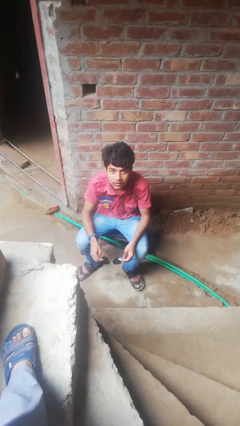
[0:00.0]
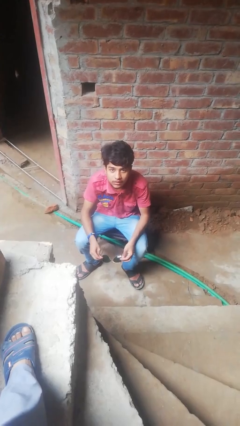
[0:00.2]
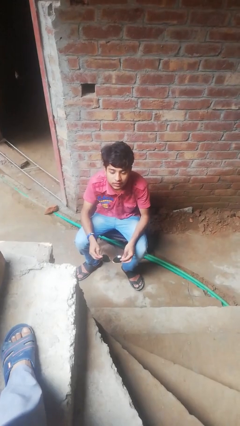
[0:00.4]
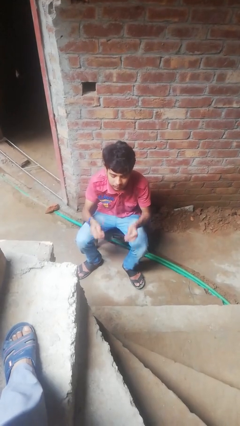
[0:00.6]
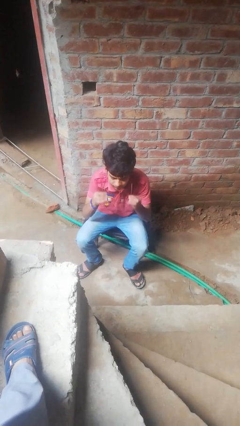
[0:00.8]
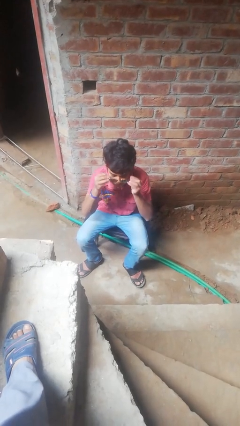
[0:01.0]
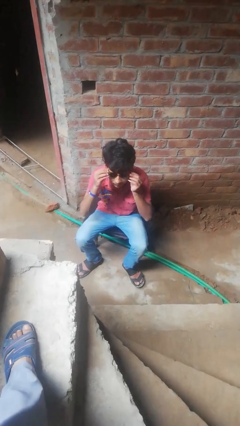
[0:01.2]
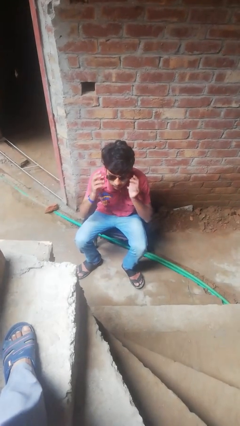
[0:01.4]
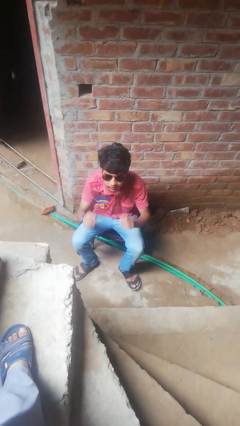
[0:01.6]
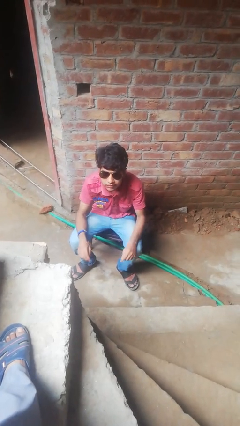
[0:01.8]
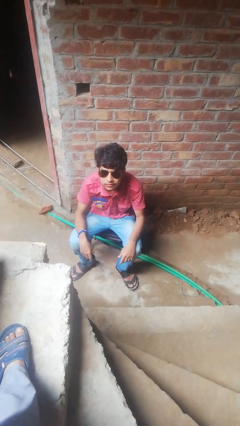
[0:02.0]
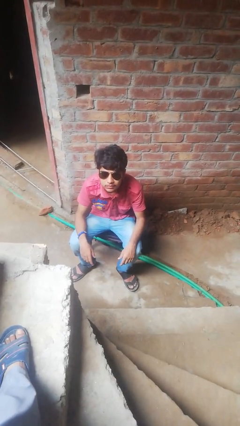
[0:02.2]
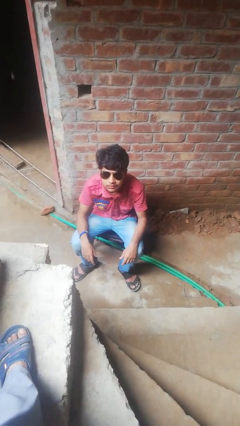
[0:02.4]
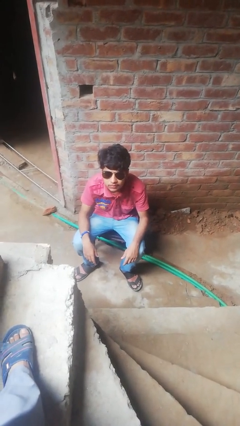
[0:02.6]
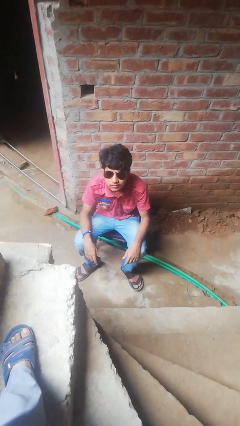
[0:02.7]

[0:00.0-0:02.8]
person puts on glasses

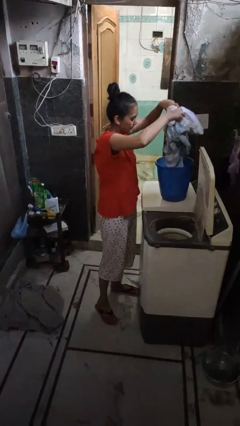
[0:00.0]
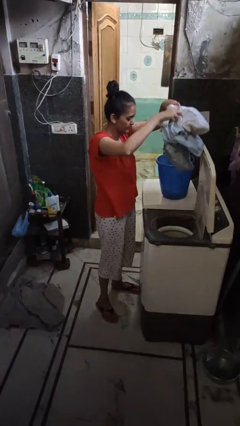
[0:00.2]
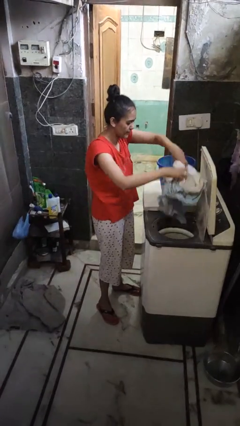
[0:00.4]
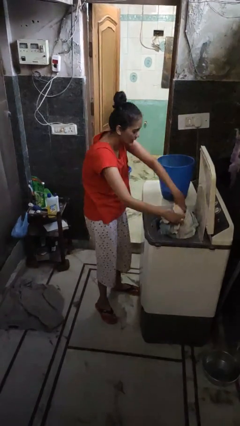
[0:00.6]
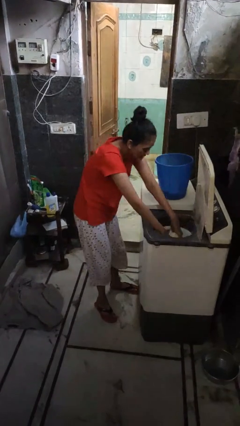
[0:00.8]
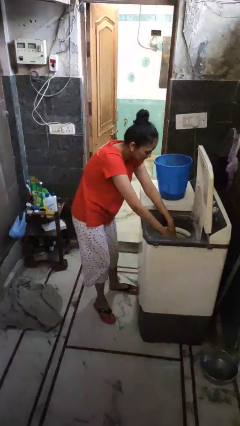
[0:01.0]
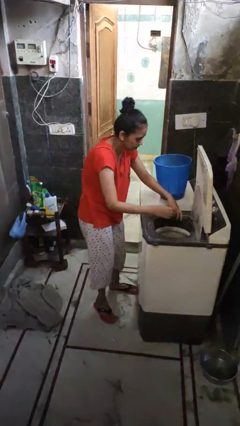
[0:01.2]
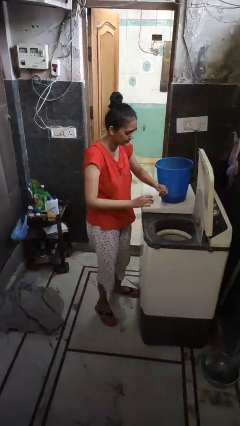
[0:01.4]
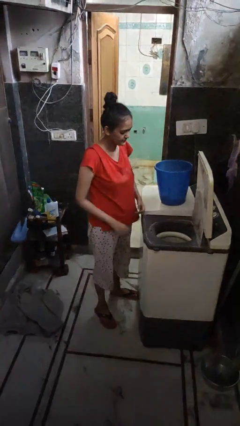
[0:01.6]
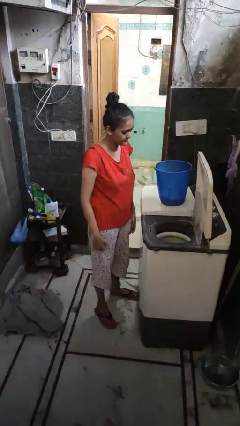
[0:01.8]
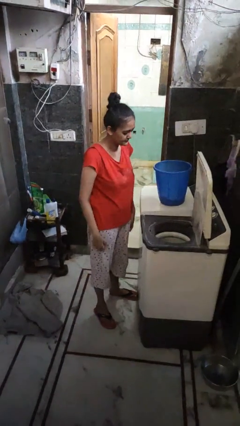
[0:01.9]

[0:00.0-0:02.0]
person loads clotheswasher

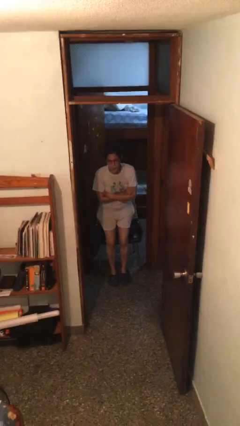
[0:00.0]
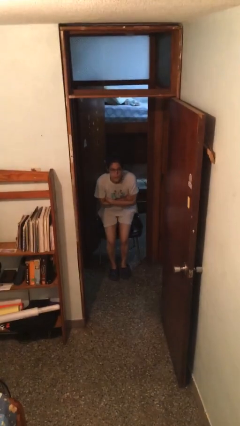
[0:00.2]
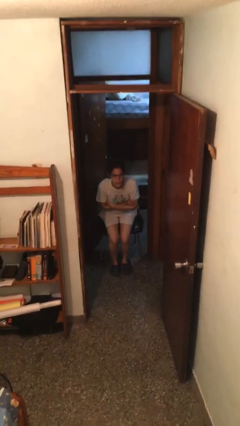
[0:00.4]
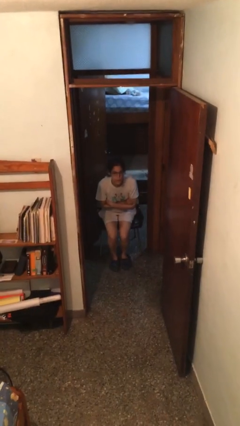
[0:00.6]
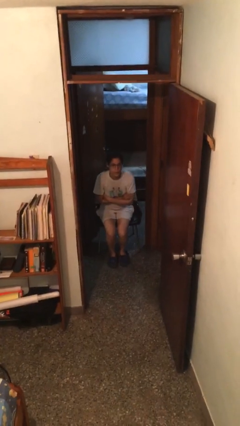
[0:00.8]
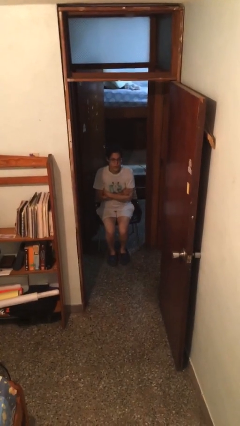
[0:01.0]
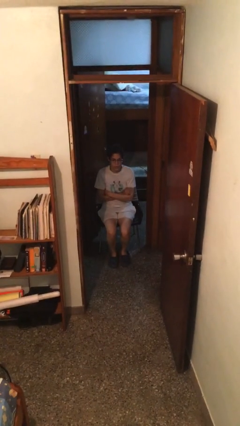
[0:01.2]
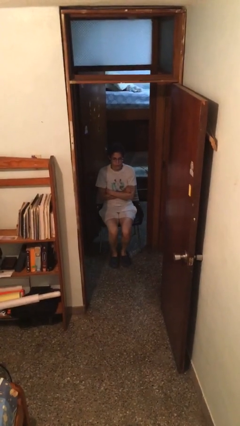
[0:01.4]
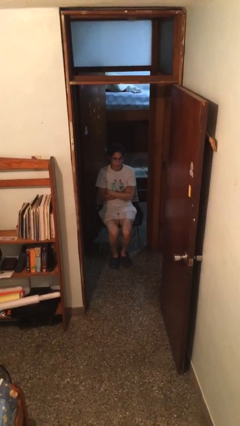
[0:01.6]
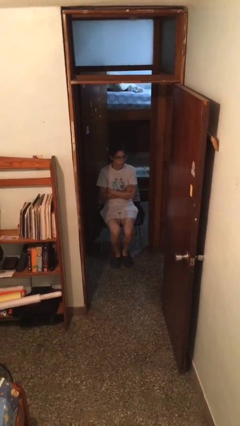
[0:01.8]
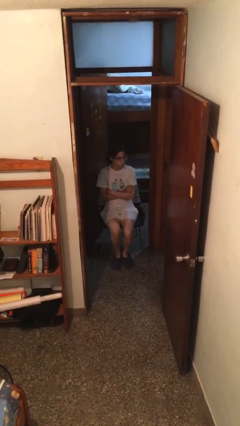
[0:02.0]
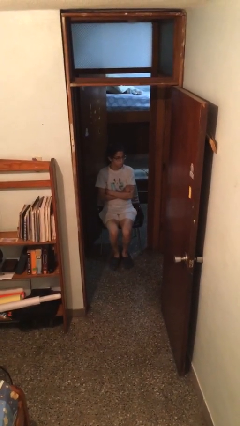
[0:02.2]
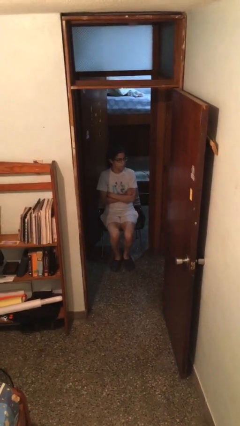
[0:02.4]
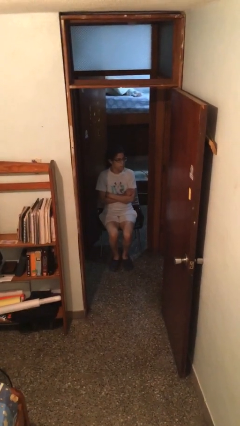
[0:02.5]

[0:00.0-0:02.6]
person sits down

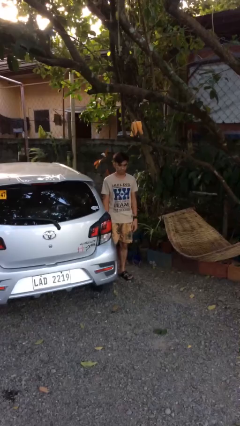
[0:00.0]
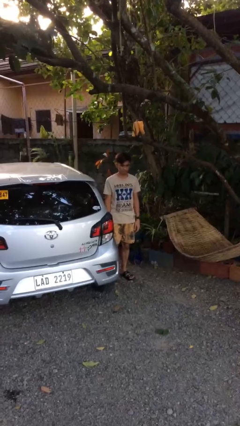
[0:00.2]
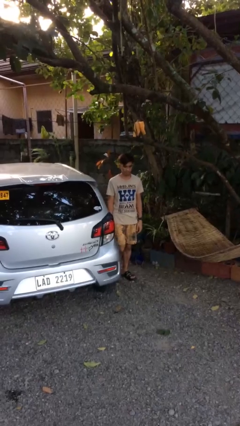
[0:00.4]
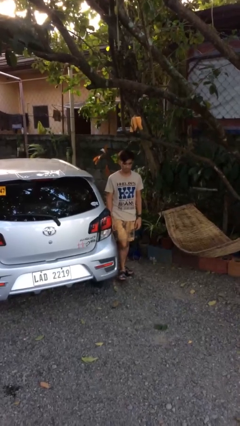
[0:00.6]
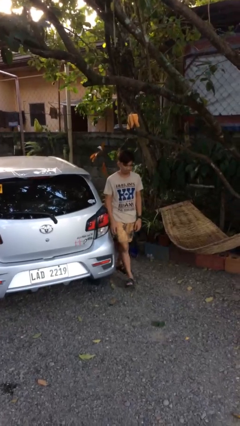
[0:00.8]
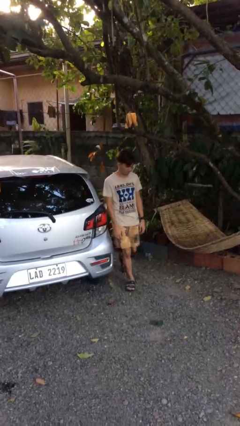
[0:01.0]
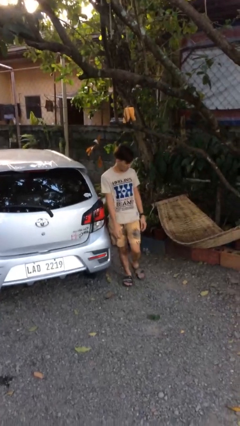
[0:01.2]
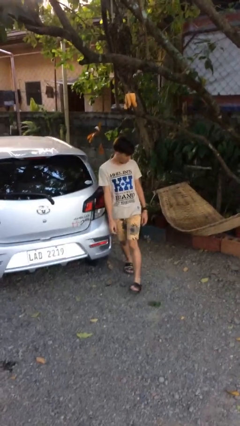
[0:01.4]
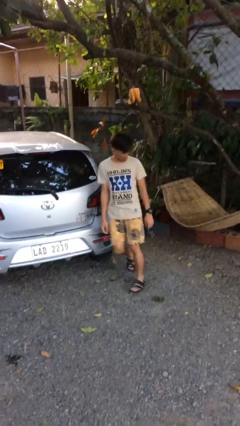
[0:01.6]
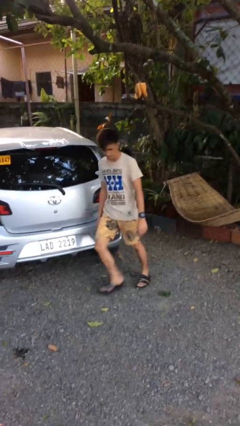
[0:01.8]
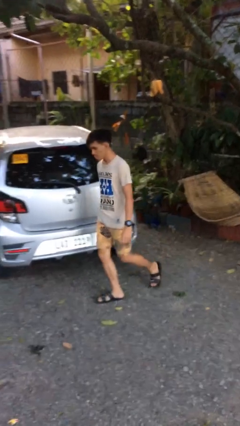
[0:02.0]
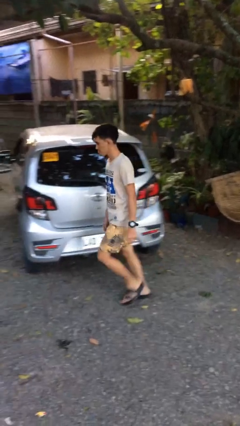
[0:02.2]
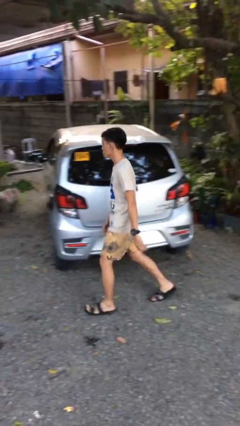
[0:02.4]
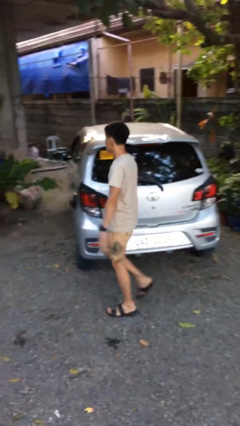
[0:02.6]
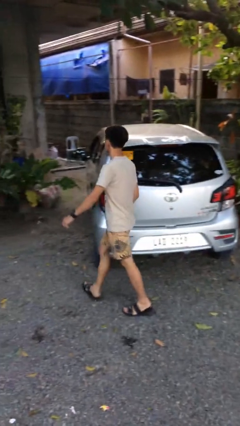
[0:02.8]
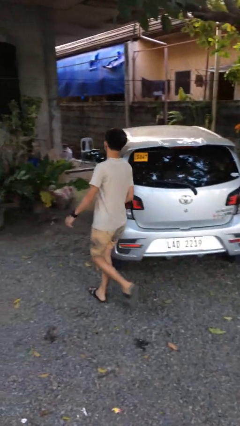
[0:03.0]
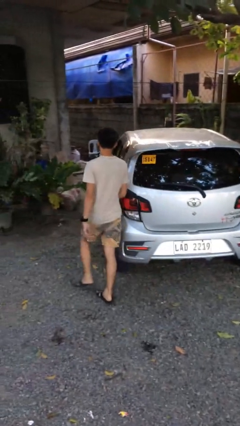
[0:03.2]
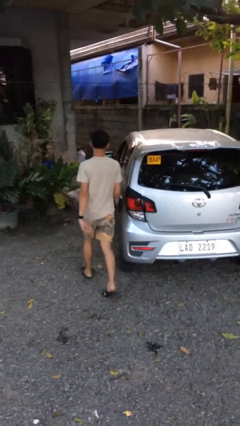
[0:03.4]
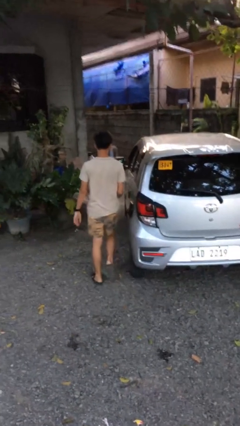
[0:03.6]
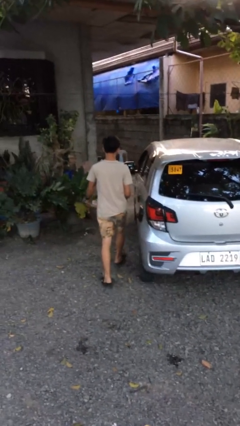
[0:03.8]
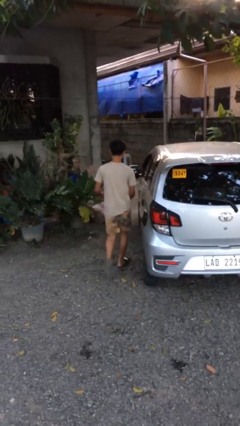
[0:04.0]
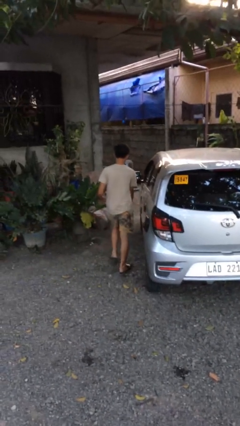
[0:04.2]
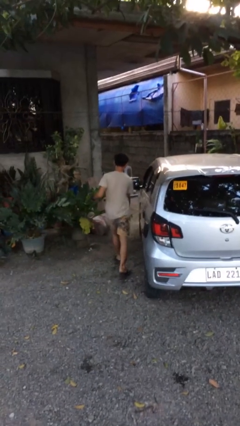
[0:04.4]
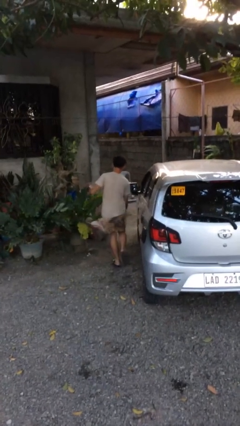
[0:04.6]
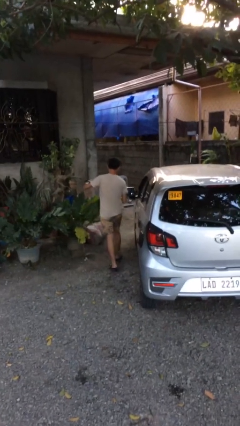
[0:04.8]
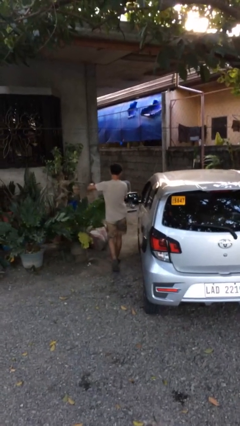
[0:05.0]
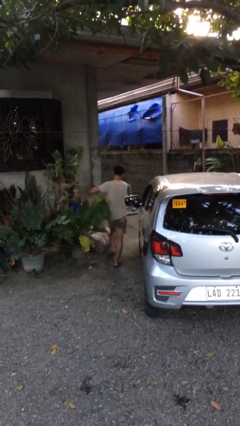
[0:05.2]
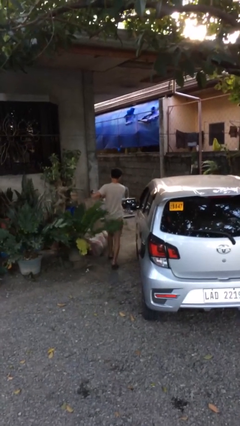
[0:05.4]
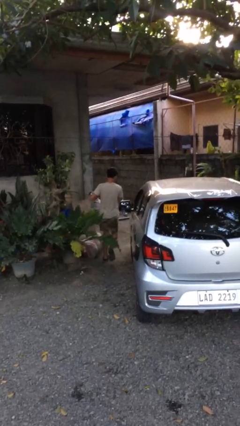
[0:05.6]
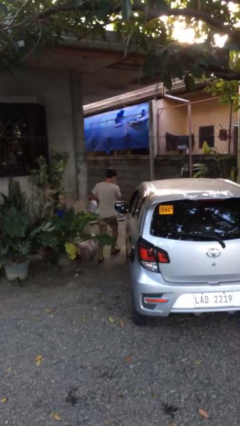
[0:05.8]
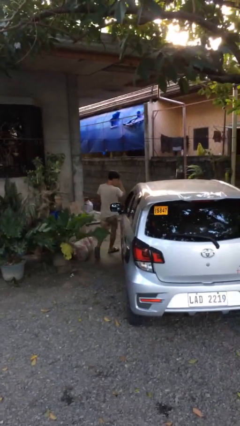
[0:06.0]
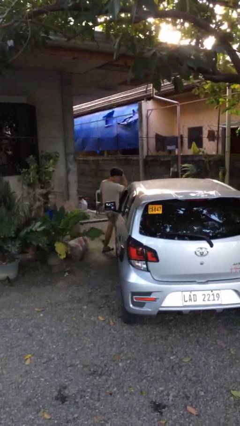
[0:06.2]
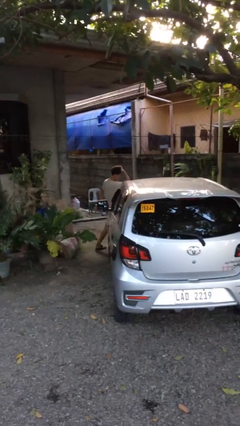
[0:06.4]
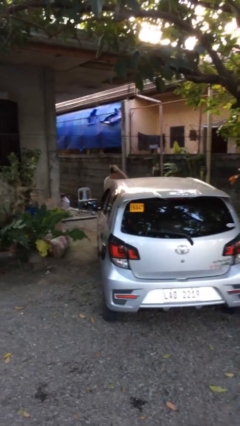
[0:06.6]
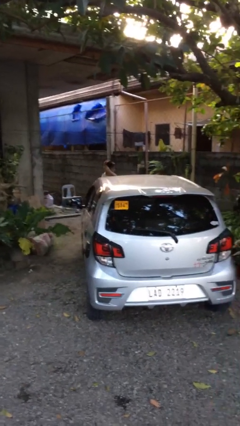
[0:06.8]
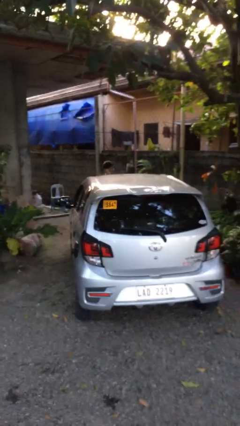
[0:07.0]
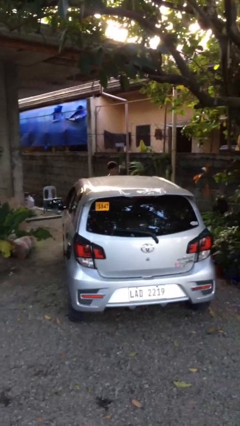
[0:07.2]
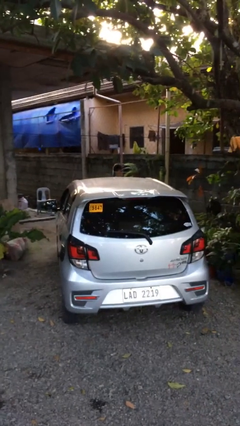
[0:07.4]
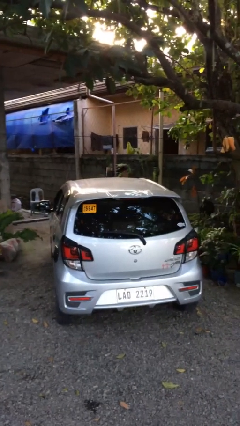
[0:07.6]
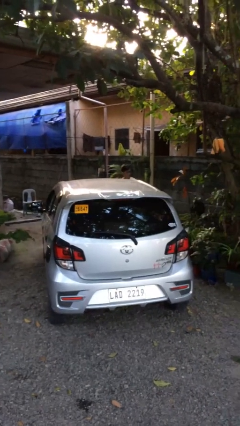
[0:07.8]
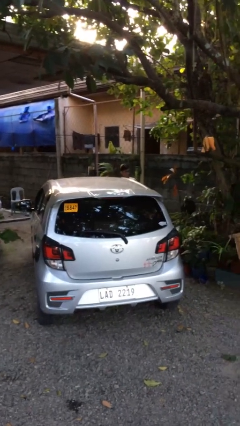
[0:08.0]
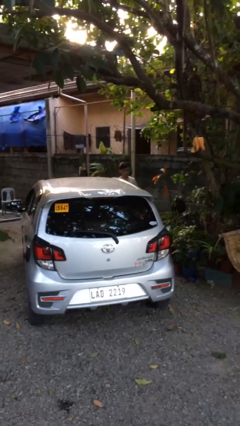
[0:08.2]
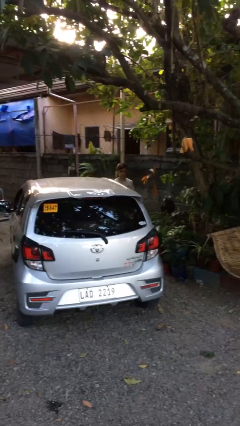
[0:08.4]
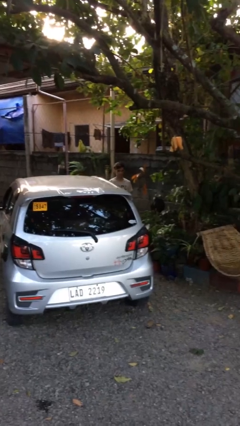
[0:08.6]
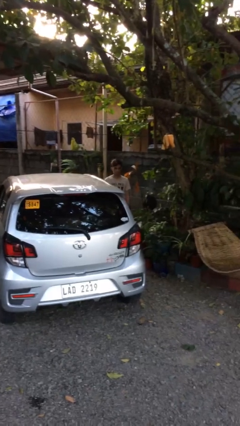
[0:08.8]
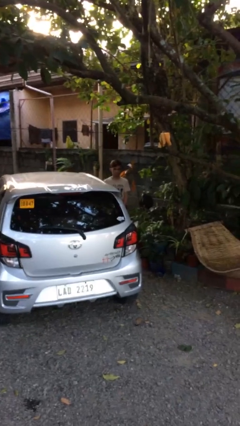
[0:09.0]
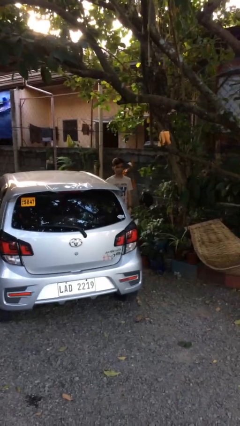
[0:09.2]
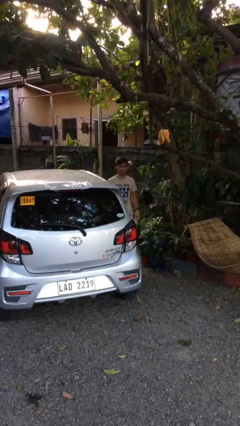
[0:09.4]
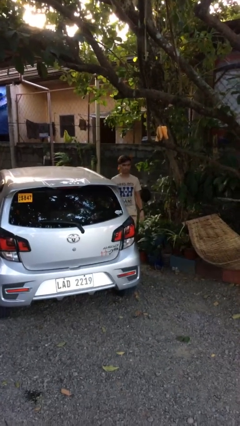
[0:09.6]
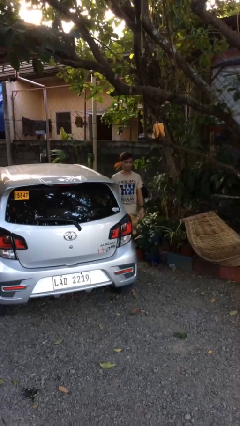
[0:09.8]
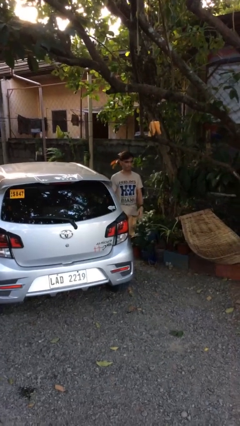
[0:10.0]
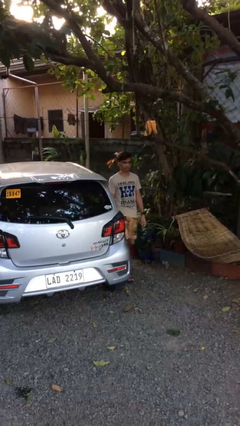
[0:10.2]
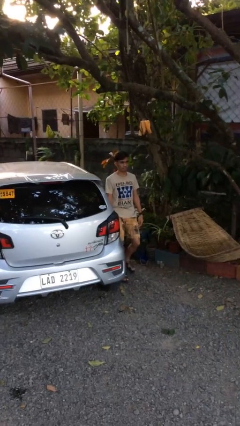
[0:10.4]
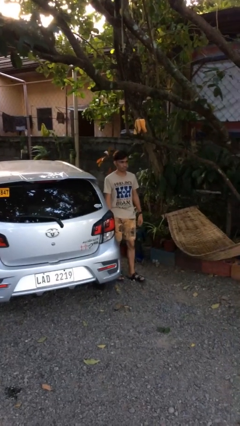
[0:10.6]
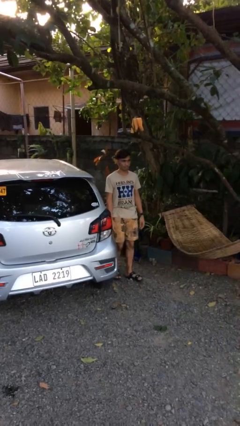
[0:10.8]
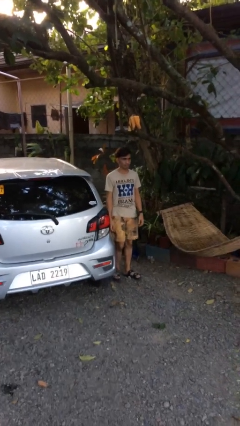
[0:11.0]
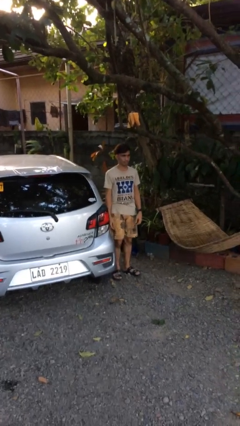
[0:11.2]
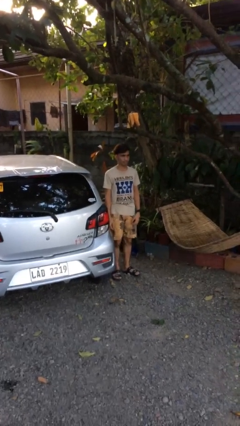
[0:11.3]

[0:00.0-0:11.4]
person walks around car
